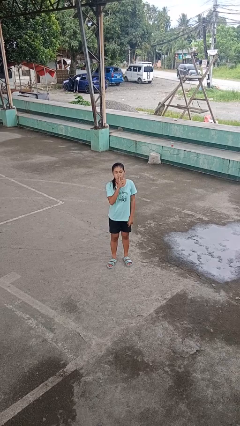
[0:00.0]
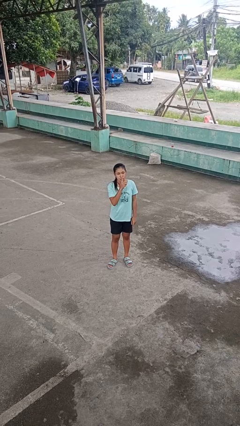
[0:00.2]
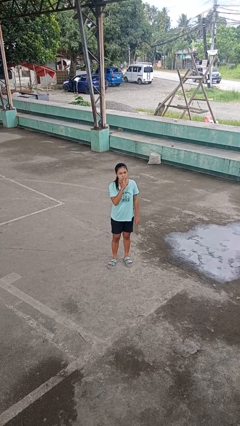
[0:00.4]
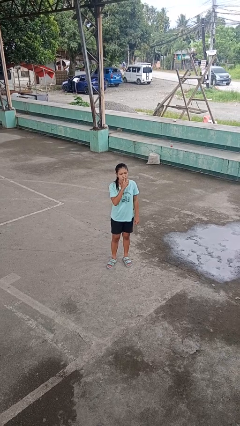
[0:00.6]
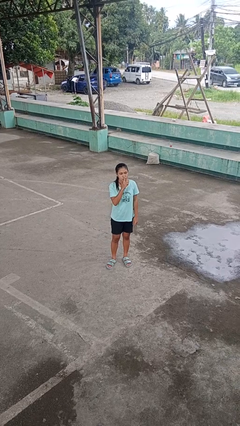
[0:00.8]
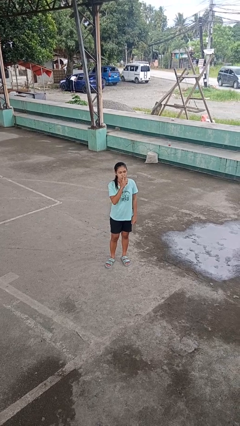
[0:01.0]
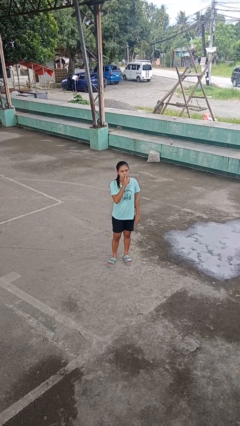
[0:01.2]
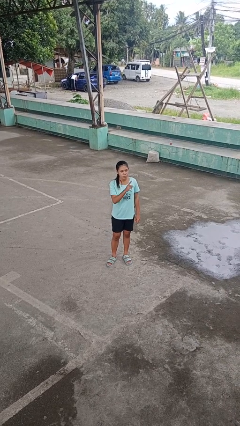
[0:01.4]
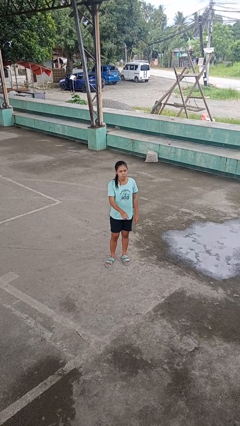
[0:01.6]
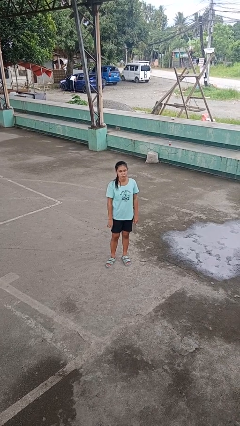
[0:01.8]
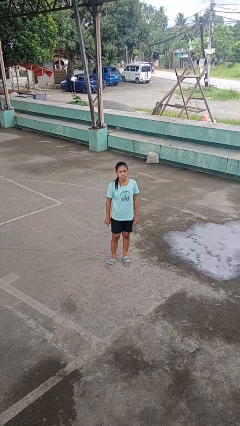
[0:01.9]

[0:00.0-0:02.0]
person gestures be quiet

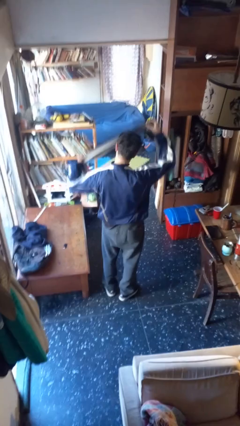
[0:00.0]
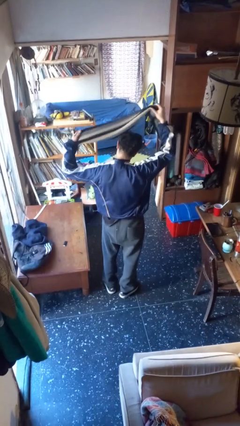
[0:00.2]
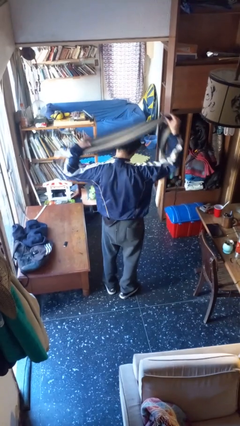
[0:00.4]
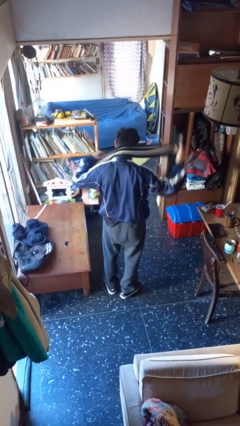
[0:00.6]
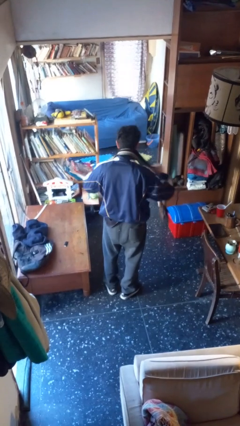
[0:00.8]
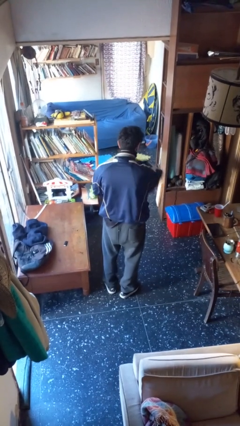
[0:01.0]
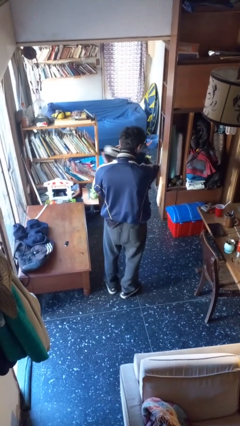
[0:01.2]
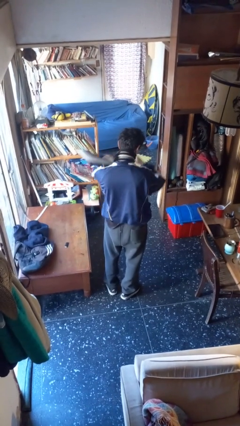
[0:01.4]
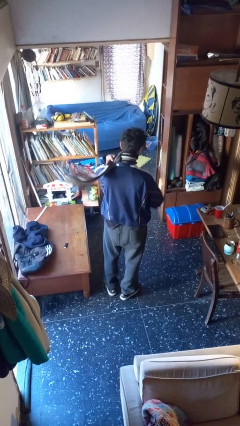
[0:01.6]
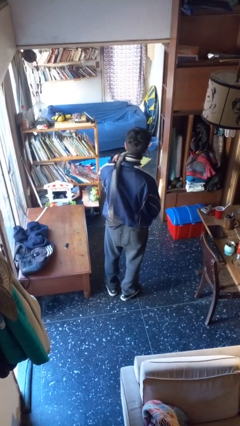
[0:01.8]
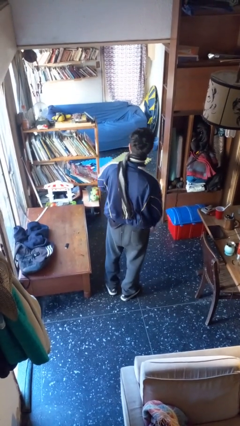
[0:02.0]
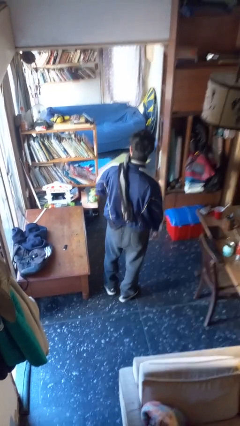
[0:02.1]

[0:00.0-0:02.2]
person puts on scarf

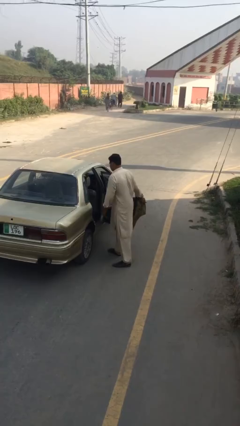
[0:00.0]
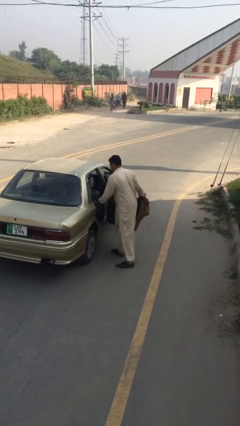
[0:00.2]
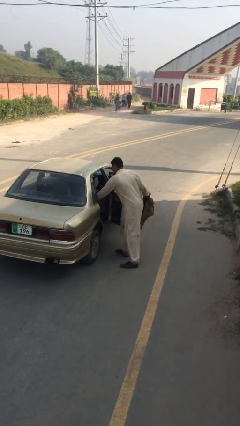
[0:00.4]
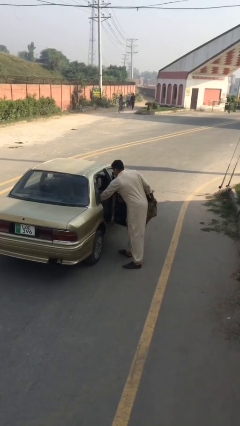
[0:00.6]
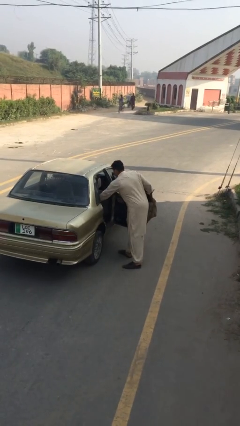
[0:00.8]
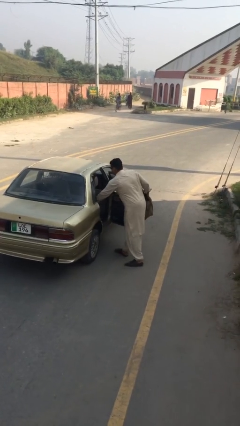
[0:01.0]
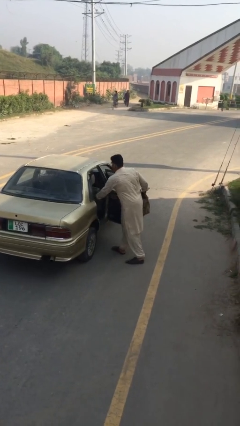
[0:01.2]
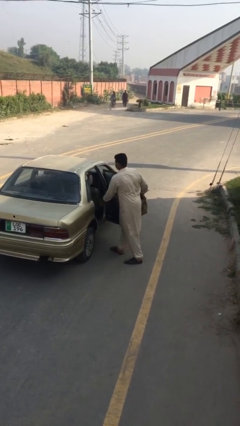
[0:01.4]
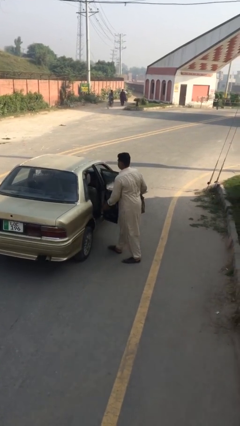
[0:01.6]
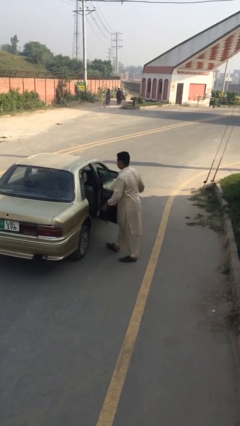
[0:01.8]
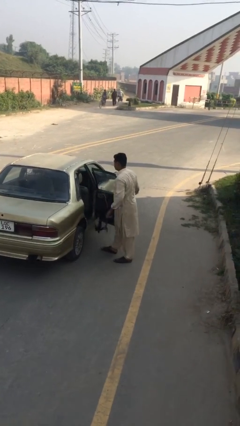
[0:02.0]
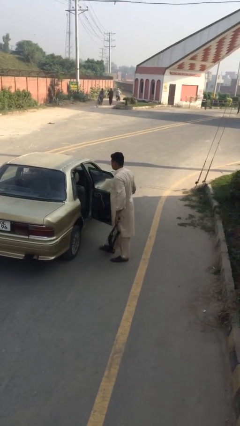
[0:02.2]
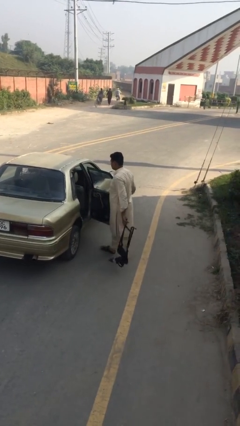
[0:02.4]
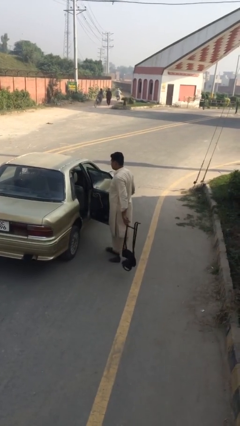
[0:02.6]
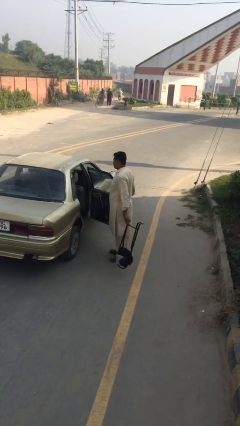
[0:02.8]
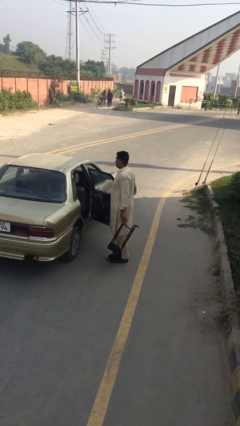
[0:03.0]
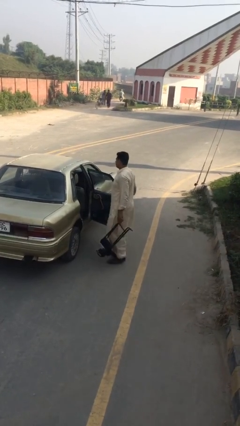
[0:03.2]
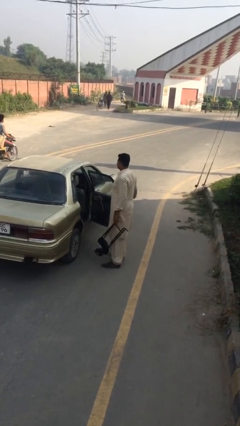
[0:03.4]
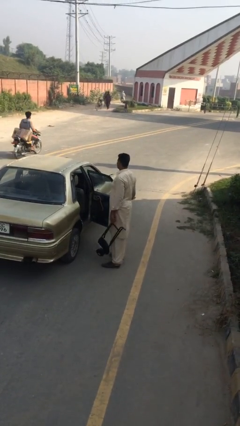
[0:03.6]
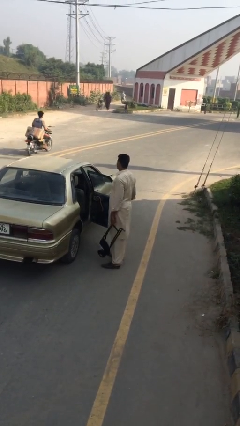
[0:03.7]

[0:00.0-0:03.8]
person unloads car

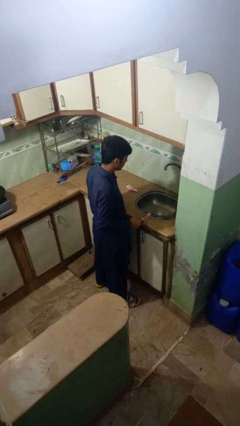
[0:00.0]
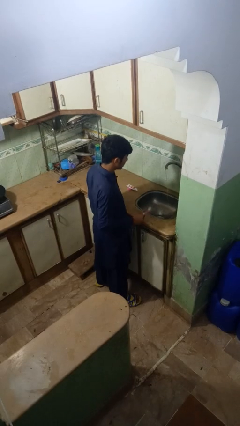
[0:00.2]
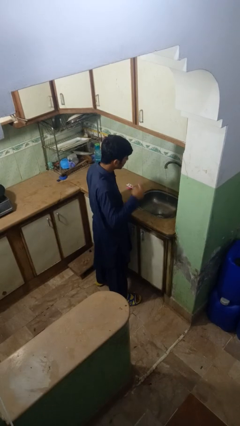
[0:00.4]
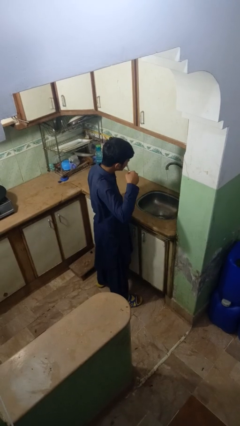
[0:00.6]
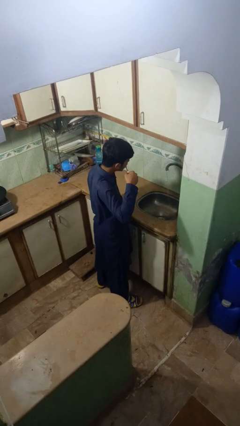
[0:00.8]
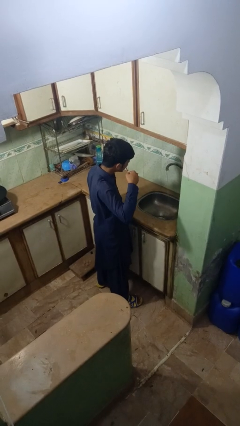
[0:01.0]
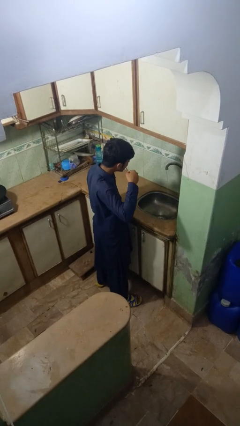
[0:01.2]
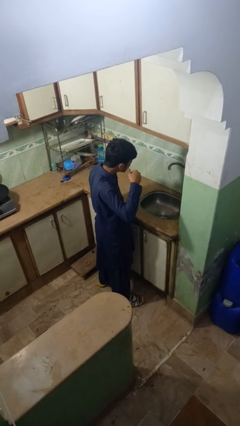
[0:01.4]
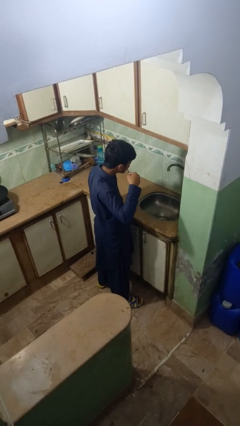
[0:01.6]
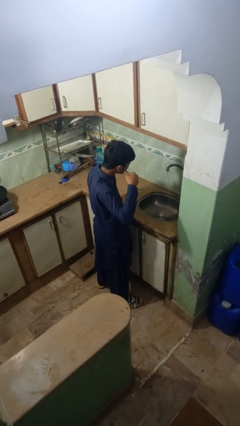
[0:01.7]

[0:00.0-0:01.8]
person brushes teeth

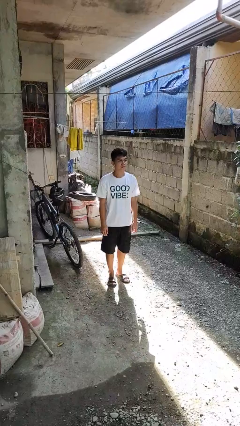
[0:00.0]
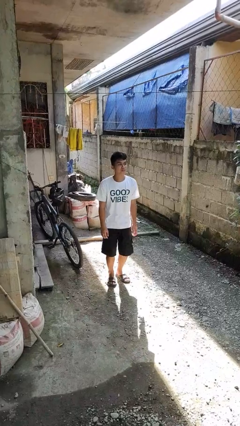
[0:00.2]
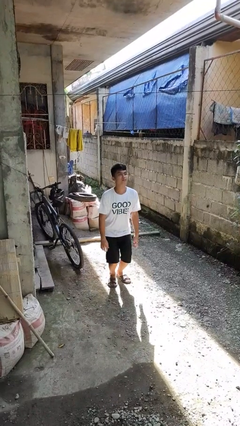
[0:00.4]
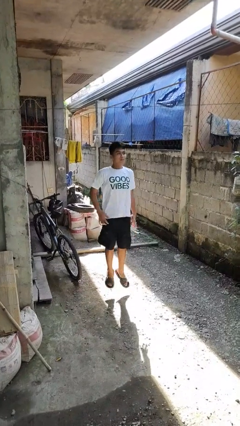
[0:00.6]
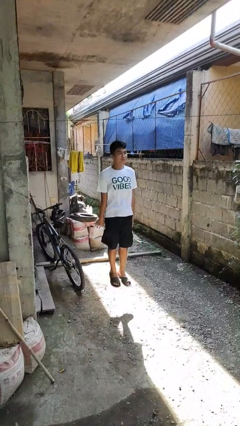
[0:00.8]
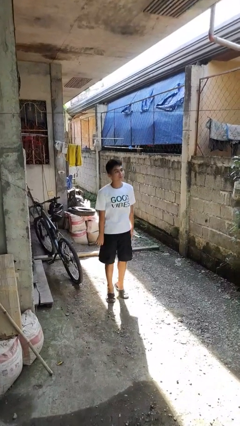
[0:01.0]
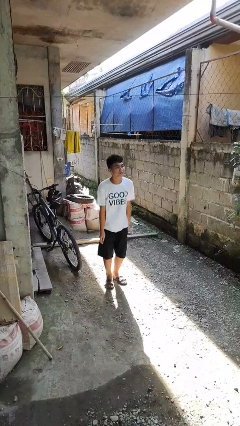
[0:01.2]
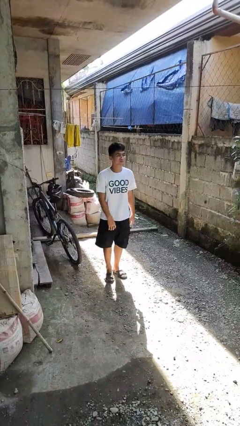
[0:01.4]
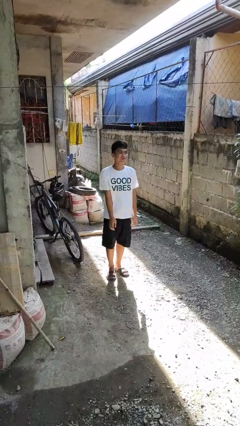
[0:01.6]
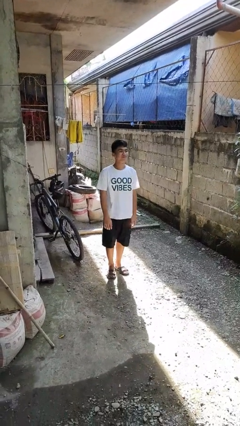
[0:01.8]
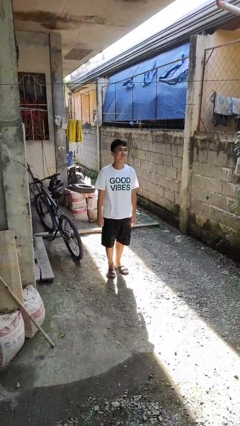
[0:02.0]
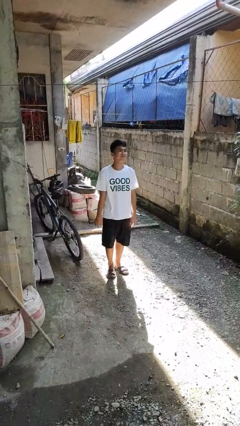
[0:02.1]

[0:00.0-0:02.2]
person jumps

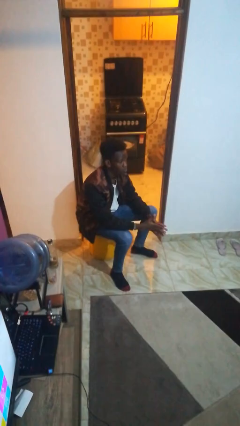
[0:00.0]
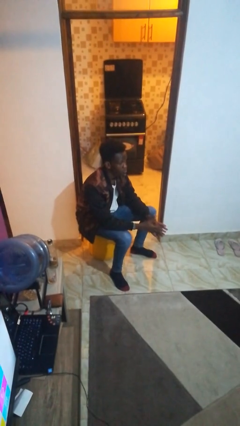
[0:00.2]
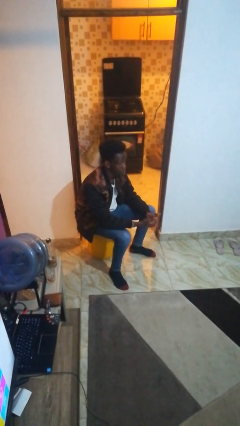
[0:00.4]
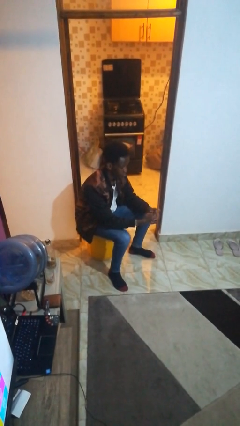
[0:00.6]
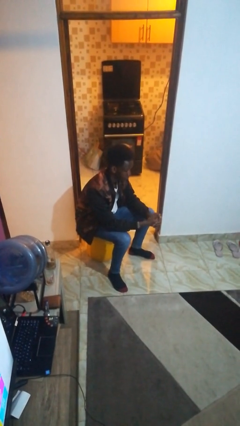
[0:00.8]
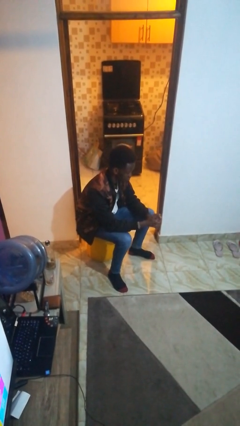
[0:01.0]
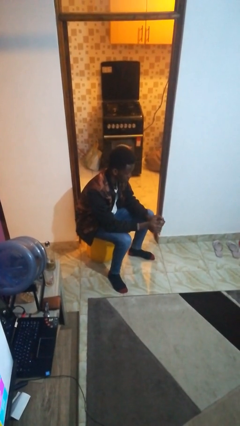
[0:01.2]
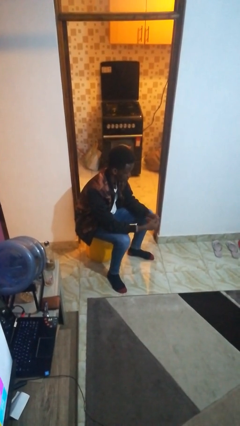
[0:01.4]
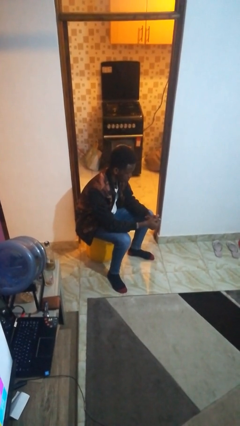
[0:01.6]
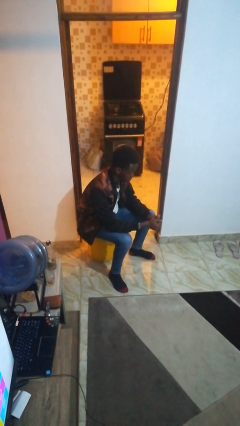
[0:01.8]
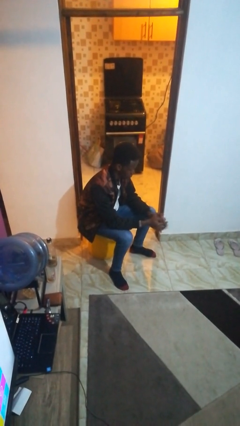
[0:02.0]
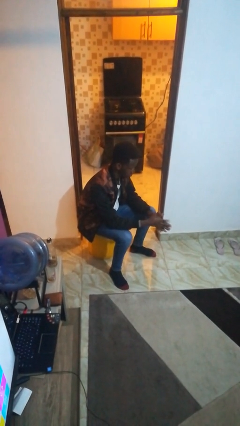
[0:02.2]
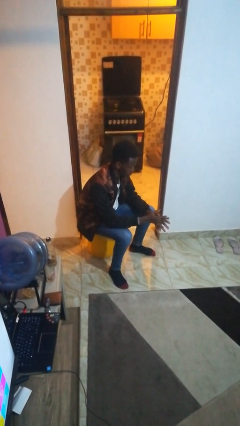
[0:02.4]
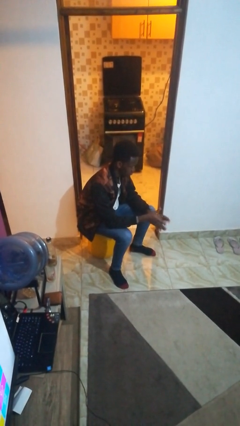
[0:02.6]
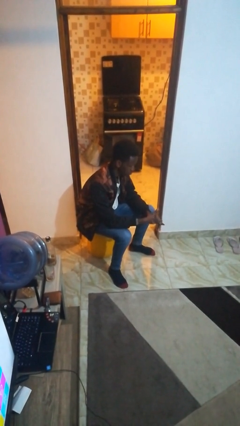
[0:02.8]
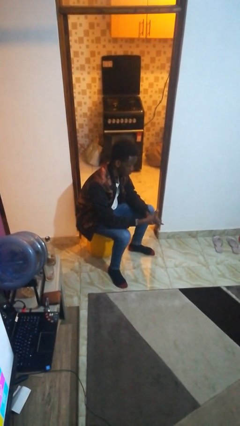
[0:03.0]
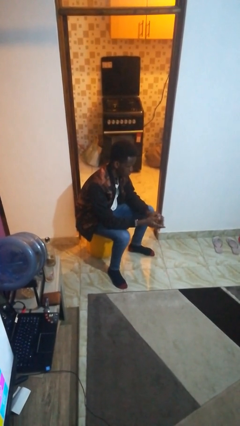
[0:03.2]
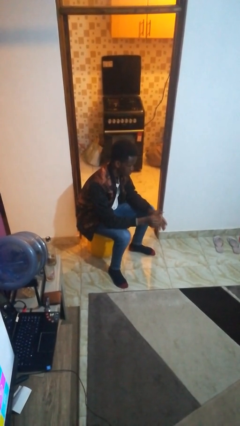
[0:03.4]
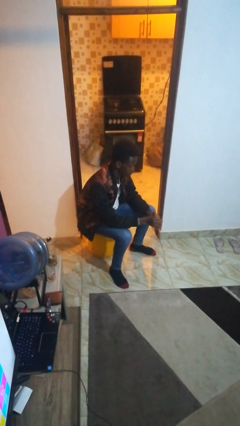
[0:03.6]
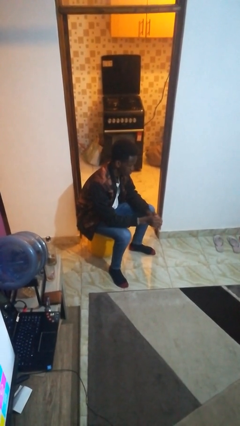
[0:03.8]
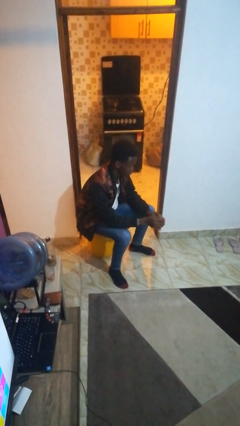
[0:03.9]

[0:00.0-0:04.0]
person cracks knuckles

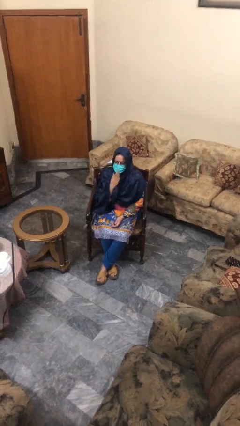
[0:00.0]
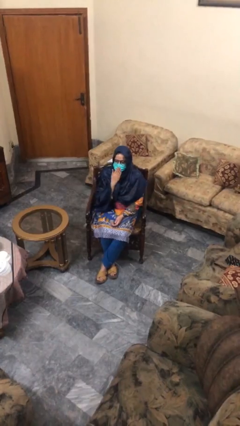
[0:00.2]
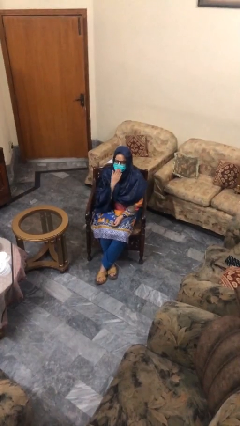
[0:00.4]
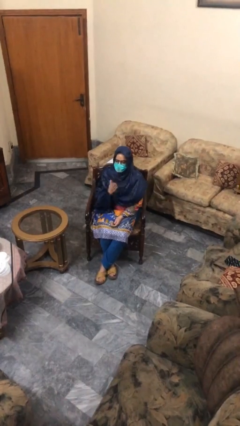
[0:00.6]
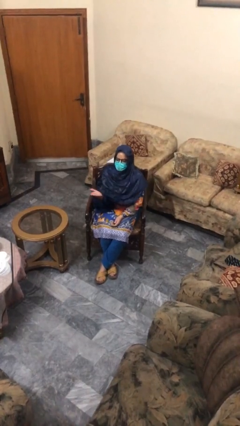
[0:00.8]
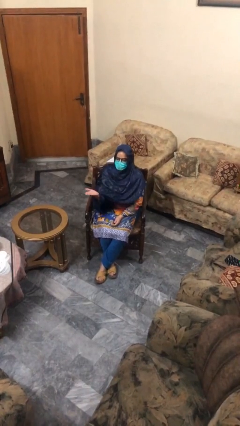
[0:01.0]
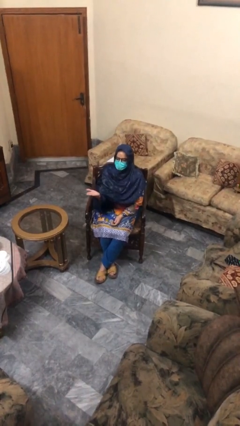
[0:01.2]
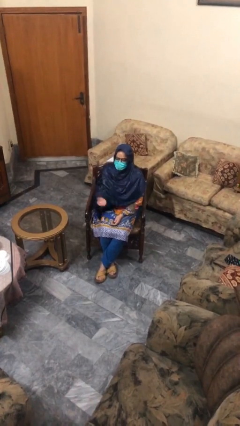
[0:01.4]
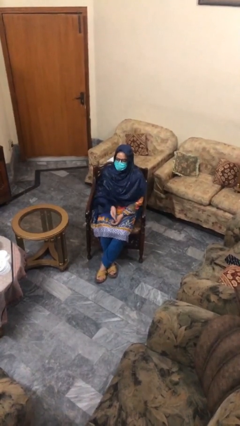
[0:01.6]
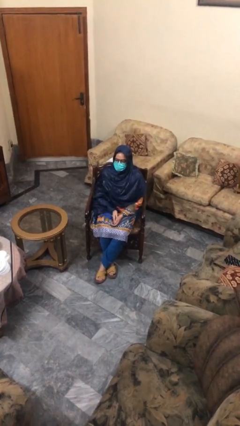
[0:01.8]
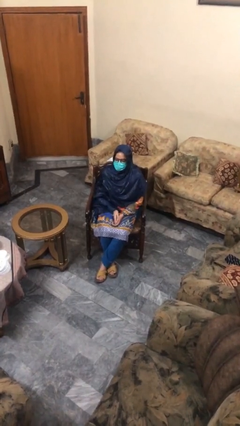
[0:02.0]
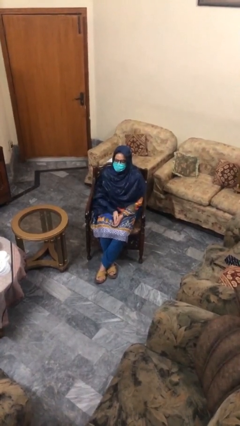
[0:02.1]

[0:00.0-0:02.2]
person gestures blow kiss
